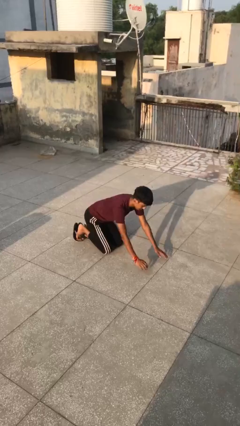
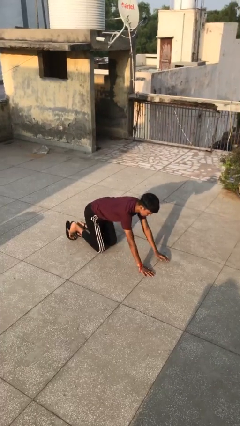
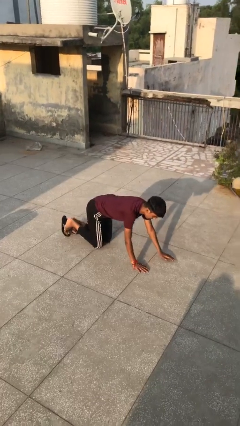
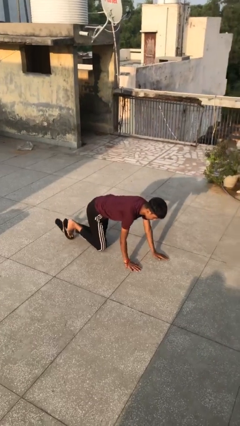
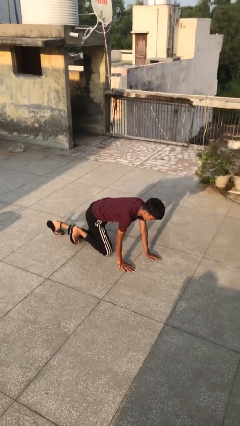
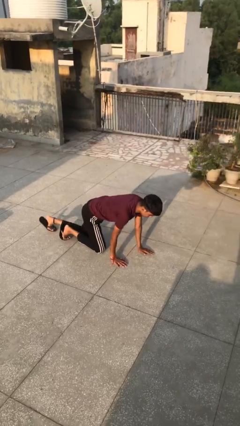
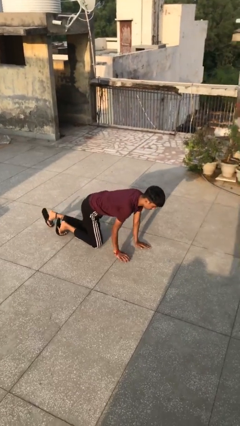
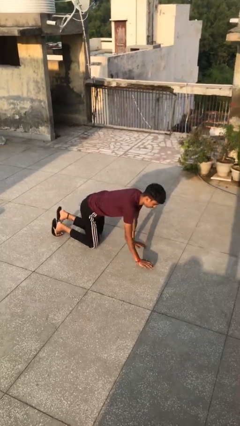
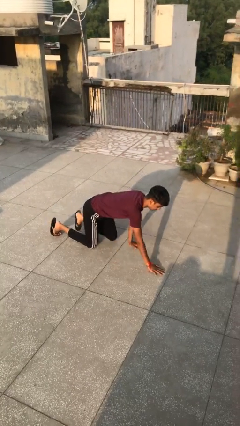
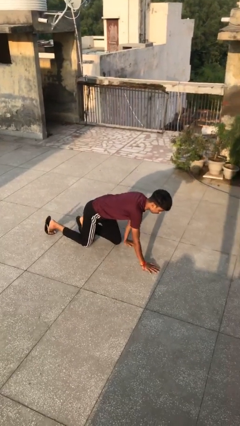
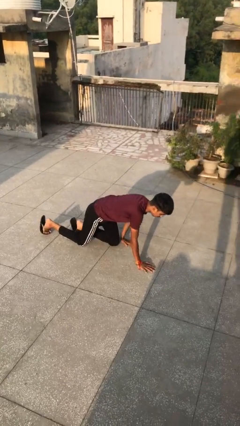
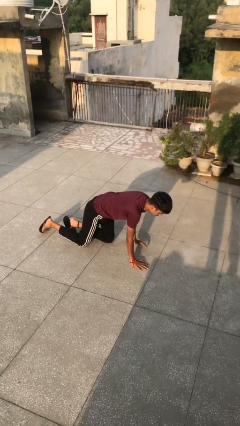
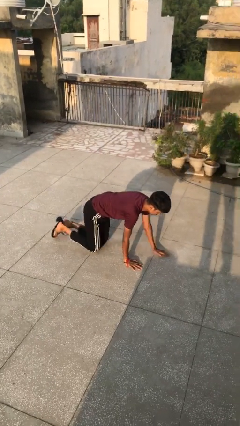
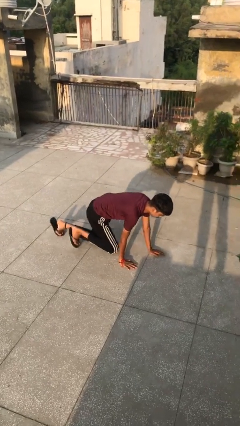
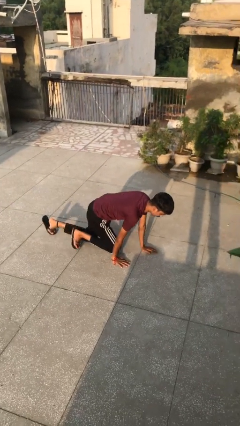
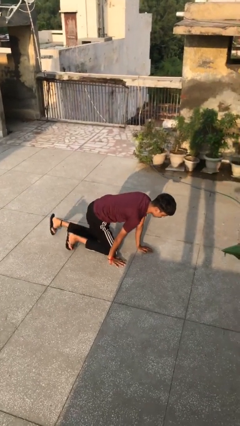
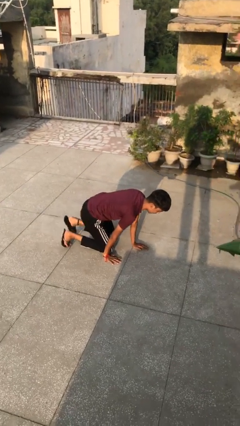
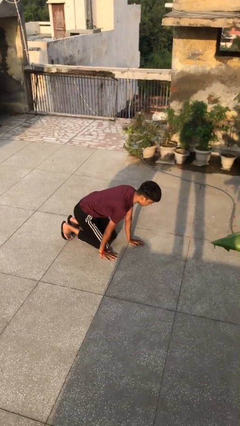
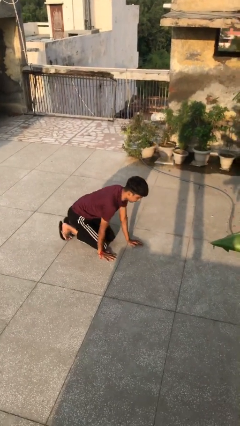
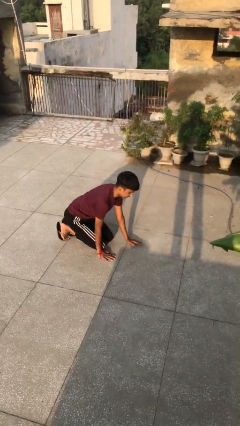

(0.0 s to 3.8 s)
person crawls

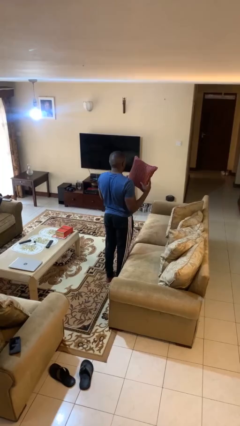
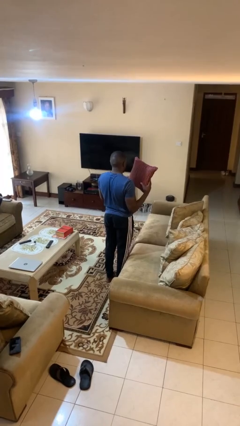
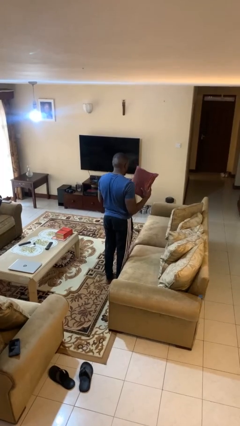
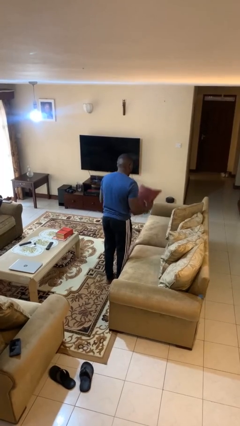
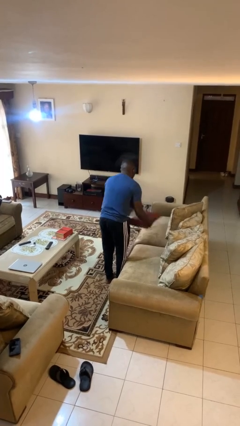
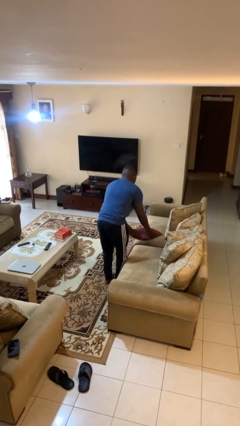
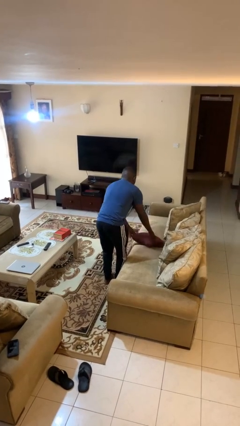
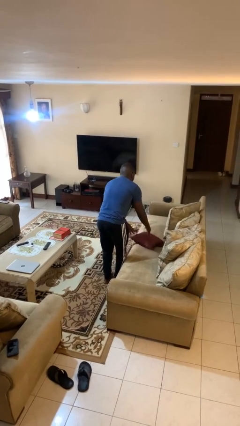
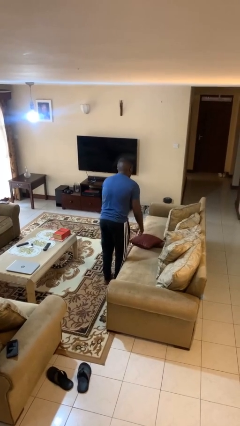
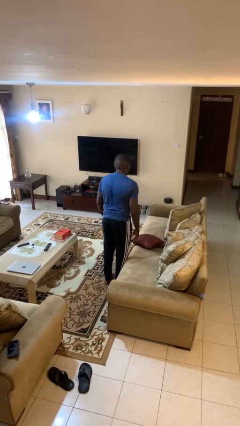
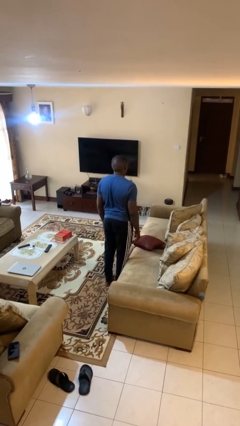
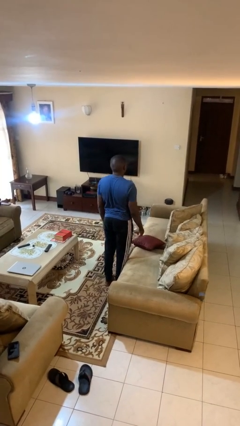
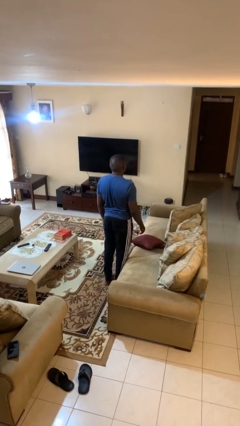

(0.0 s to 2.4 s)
person puts down object on couch

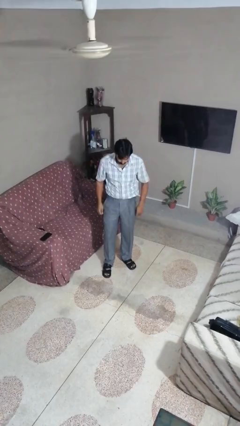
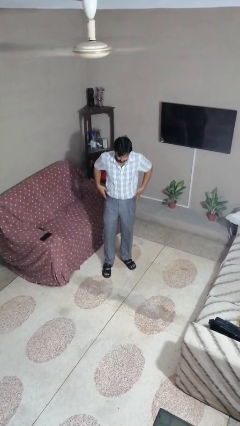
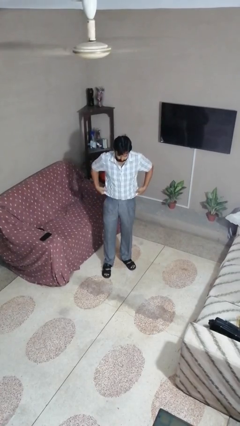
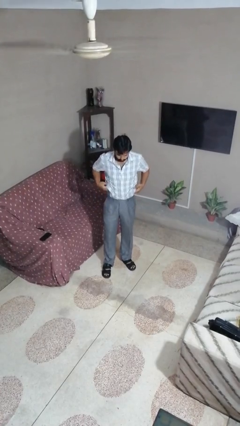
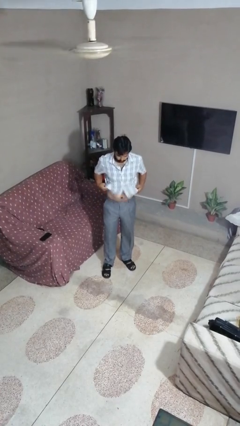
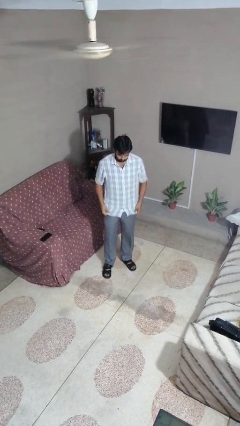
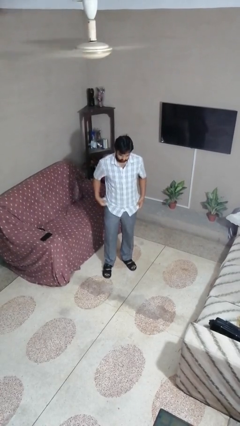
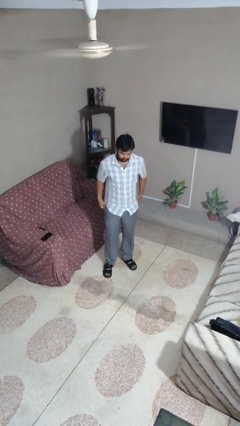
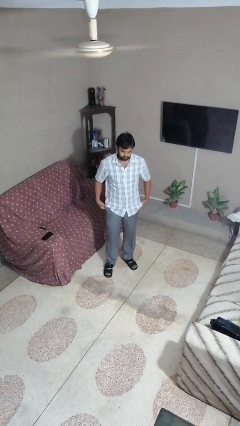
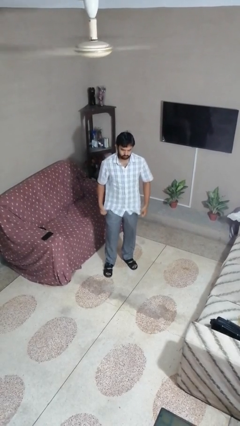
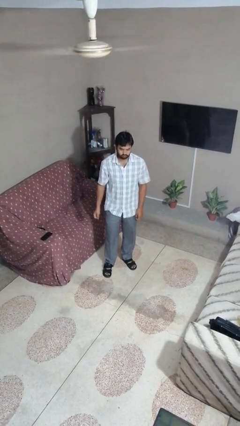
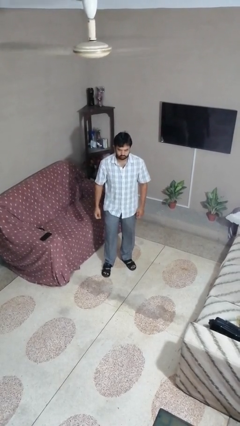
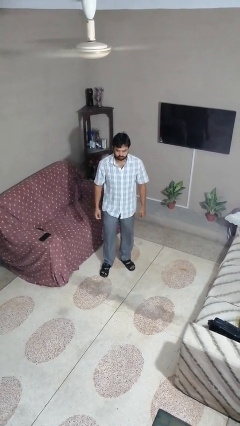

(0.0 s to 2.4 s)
person untucks shirt

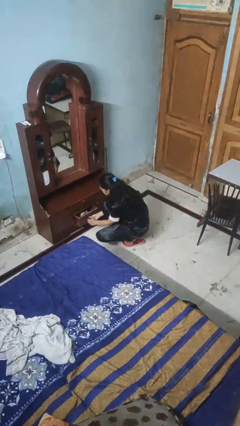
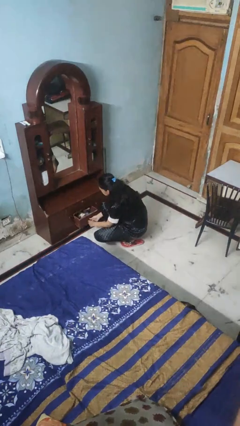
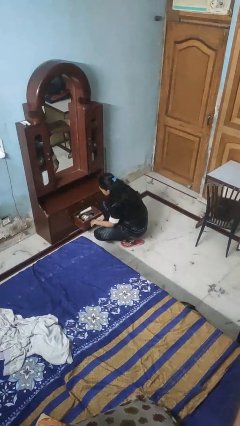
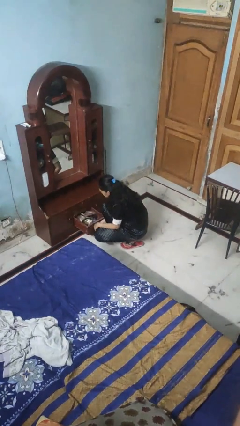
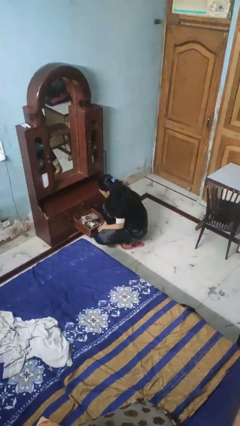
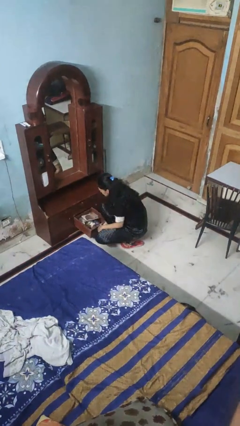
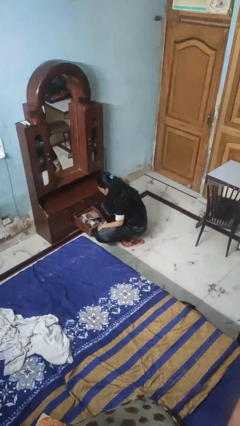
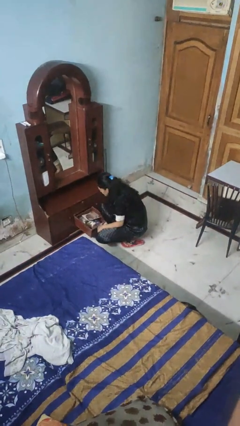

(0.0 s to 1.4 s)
person opens dresser drawer

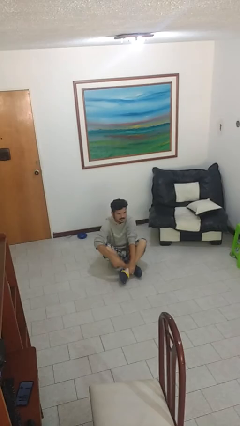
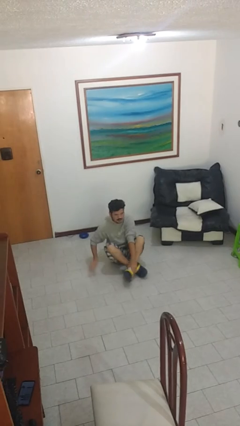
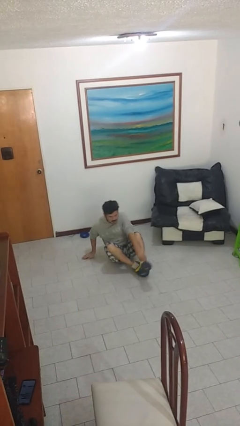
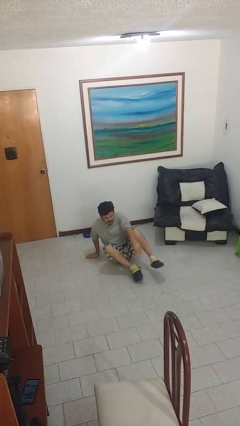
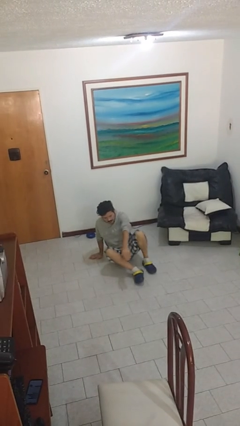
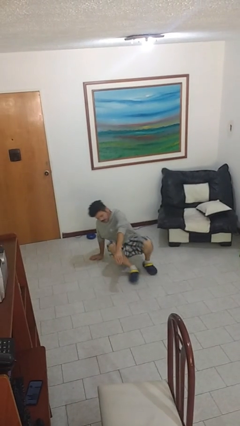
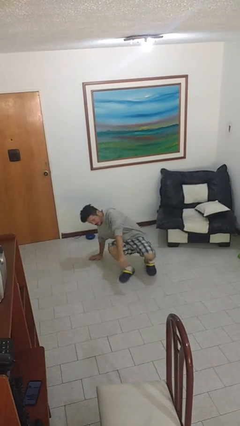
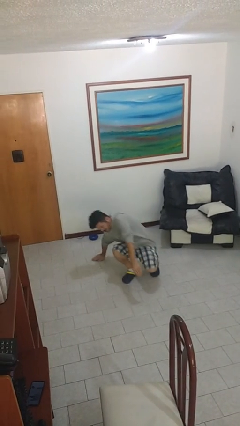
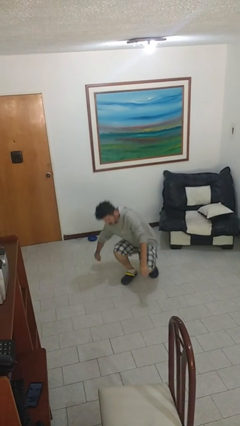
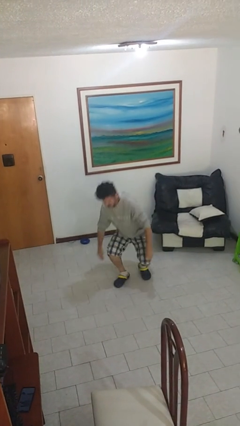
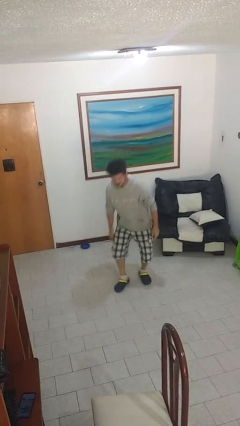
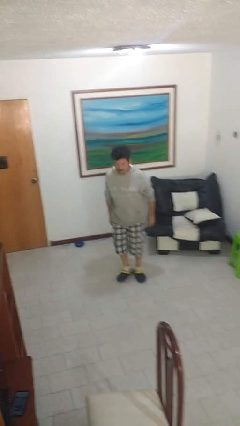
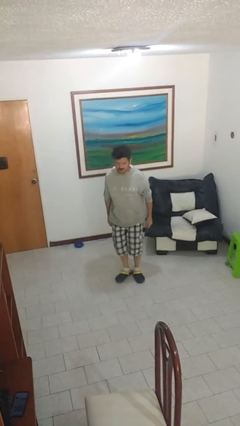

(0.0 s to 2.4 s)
person stands up from floor

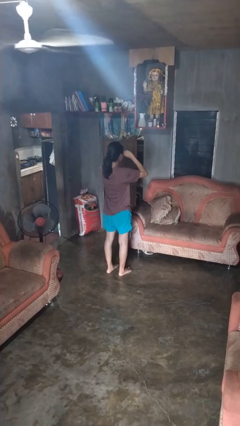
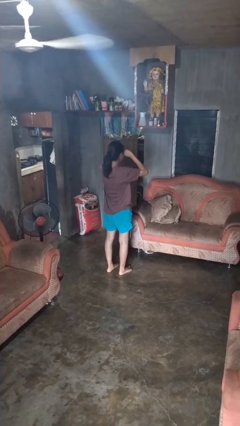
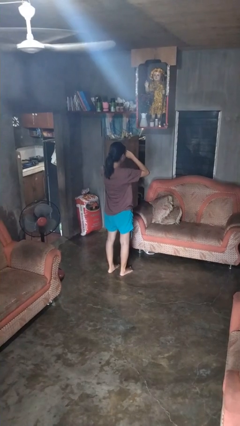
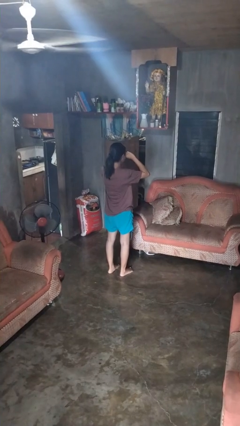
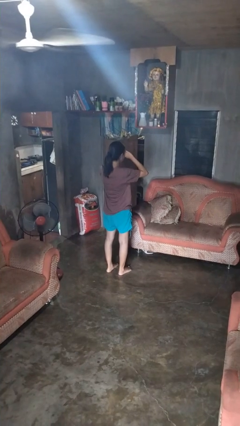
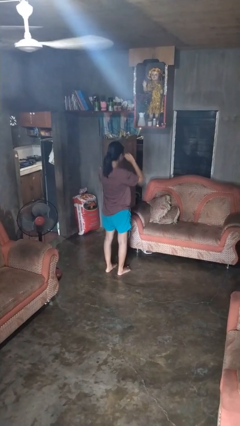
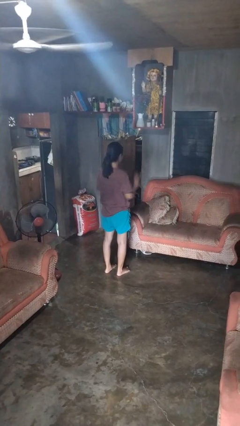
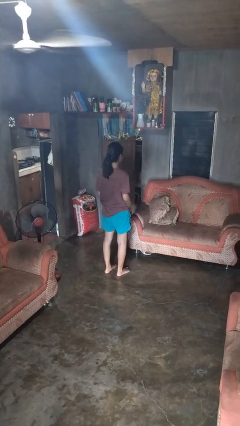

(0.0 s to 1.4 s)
person rubs eyes

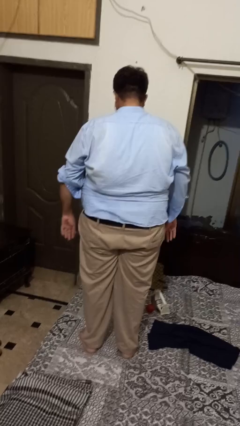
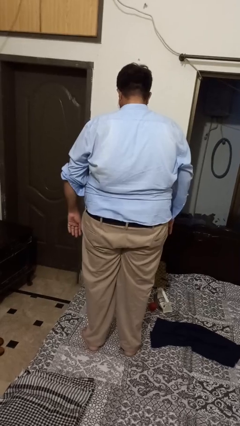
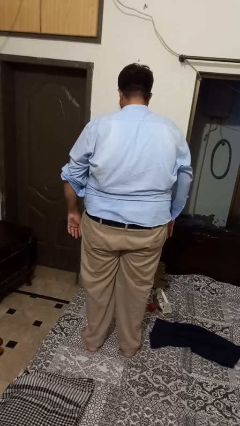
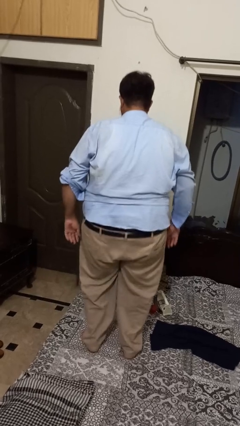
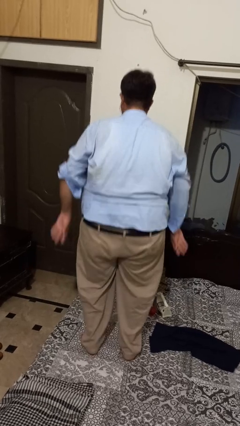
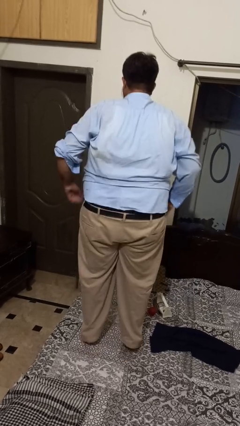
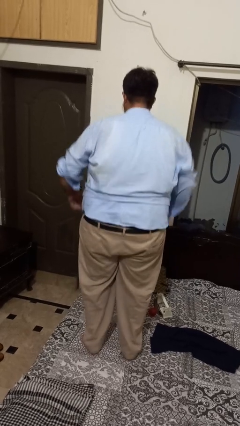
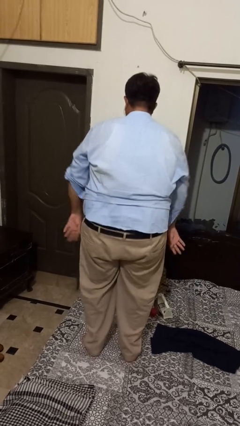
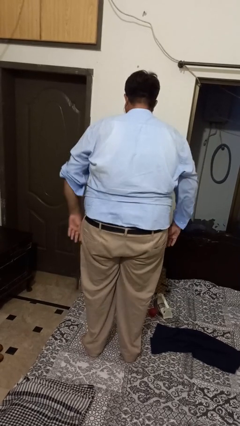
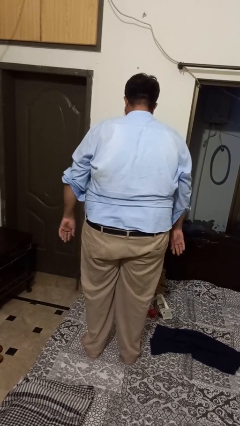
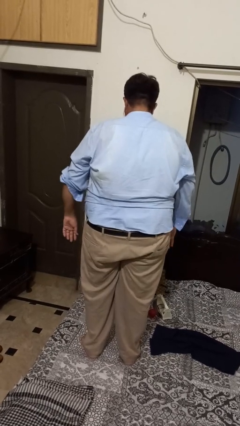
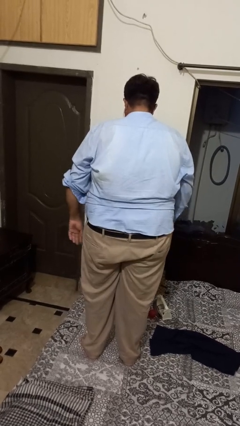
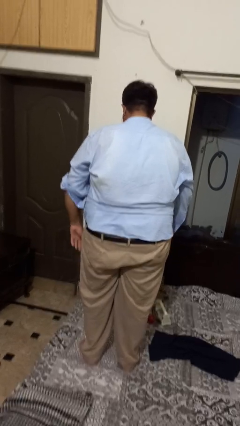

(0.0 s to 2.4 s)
person jumps on bed

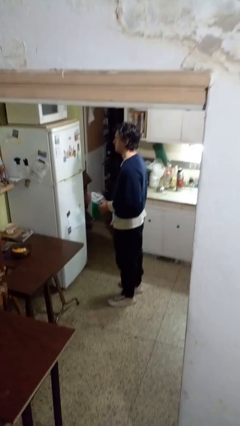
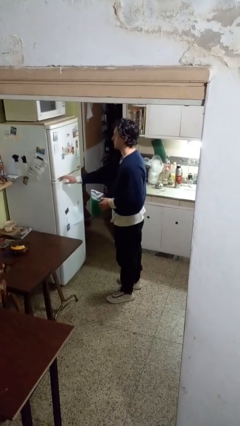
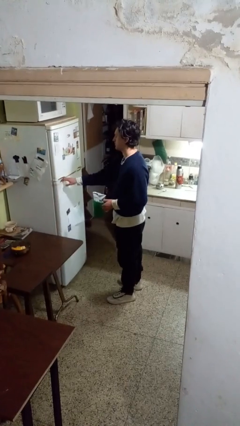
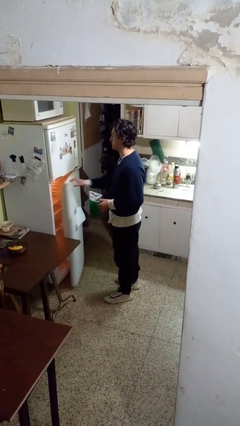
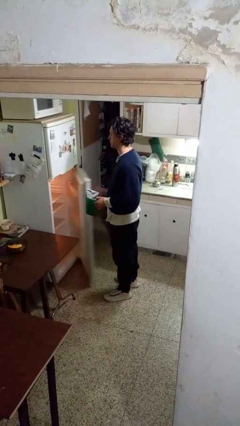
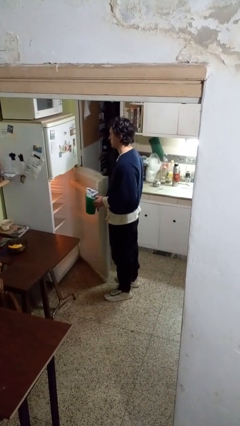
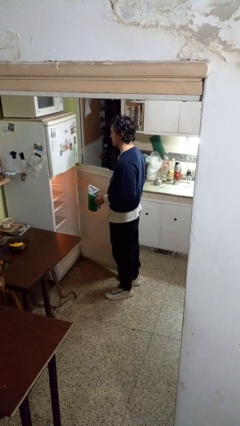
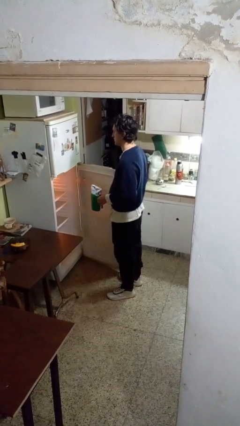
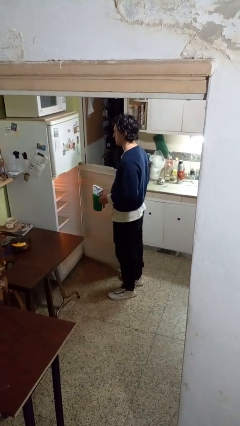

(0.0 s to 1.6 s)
person opens refrigerator
